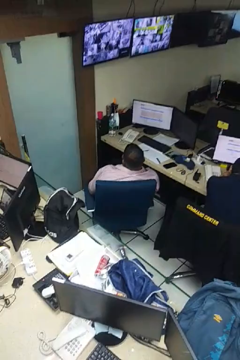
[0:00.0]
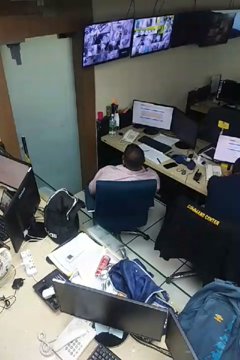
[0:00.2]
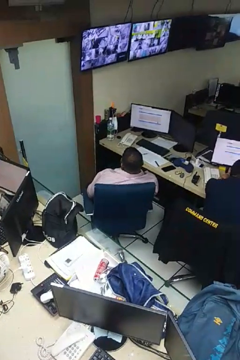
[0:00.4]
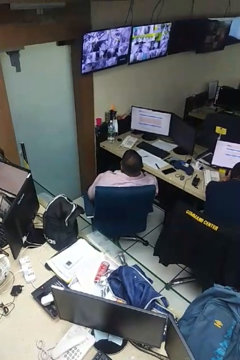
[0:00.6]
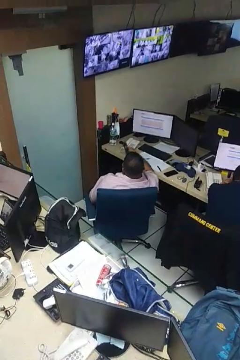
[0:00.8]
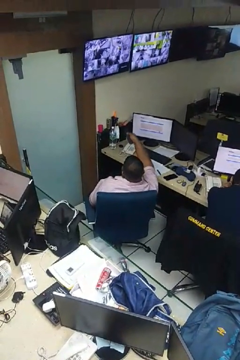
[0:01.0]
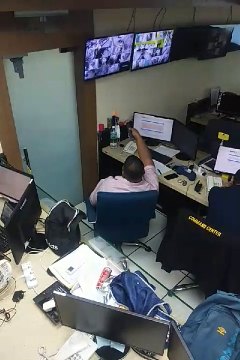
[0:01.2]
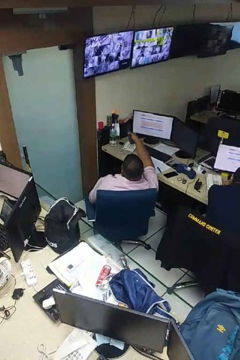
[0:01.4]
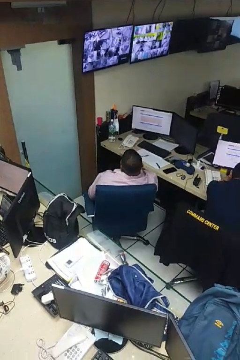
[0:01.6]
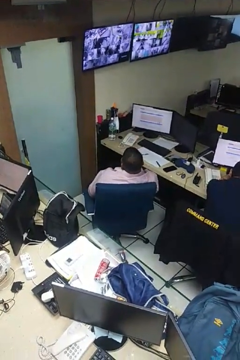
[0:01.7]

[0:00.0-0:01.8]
person uses television remote

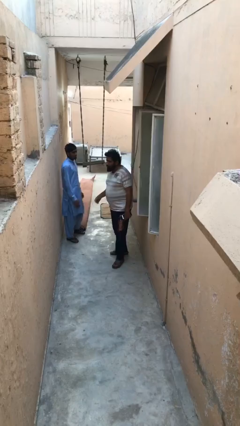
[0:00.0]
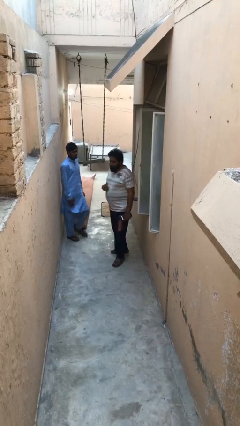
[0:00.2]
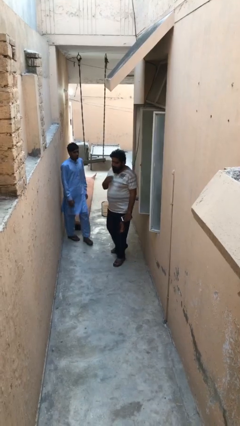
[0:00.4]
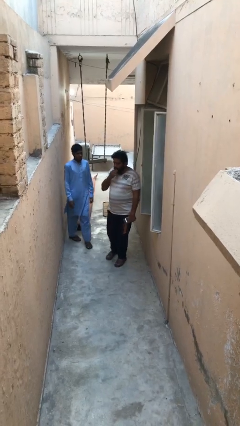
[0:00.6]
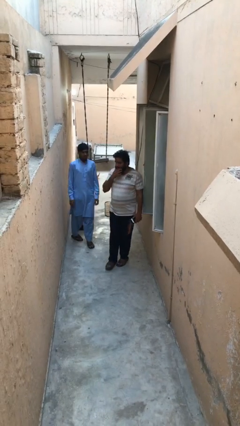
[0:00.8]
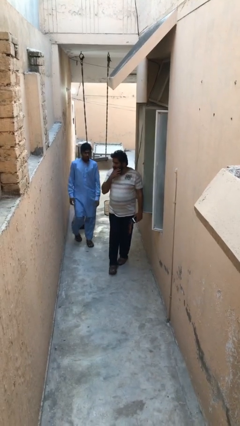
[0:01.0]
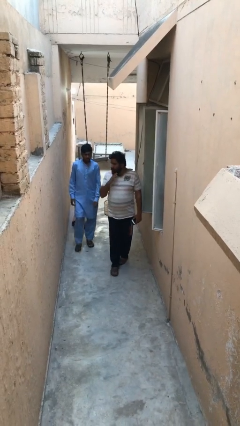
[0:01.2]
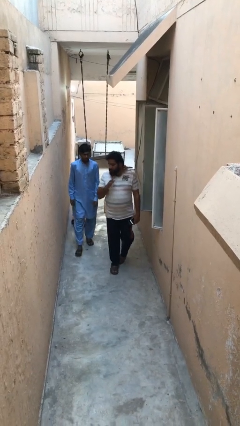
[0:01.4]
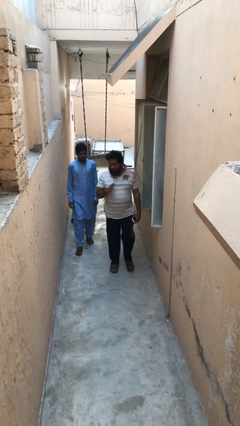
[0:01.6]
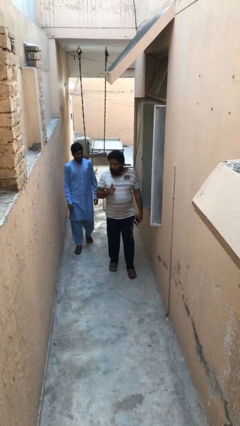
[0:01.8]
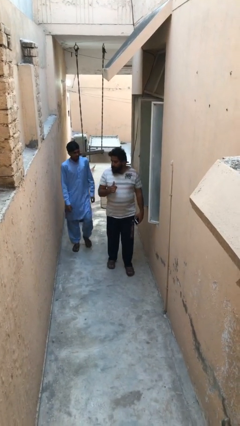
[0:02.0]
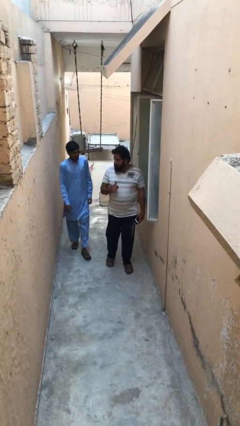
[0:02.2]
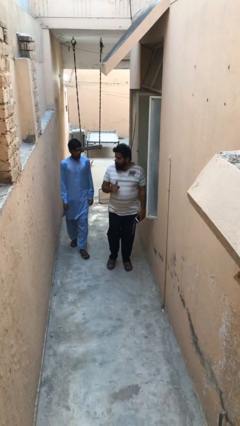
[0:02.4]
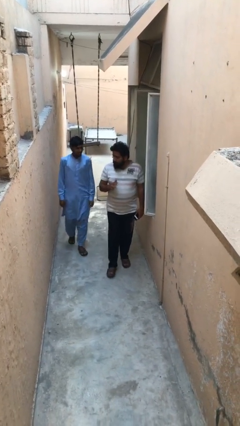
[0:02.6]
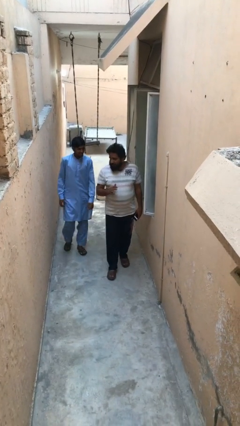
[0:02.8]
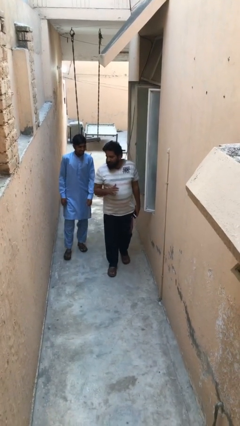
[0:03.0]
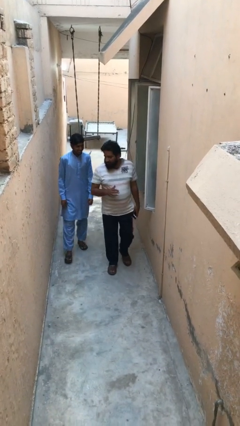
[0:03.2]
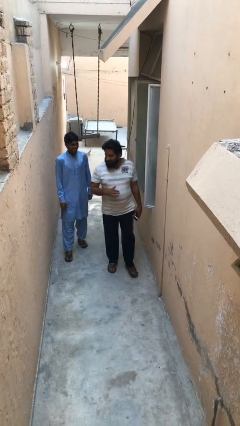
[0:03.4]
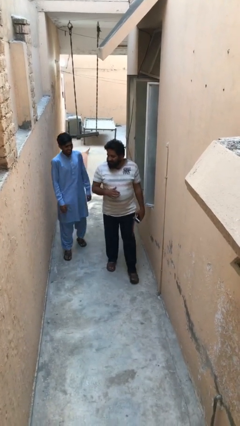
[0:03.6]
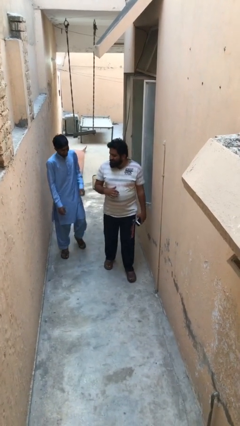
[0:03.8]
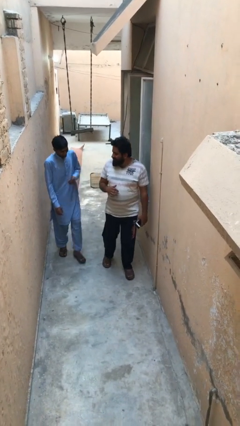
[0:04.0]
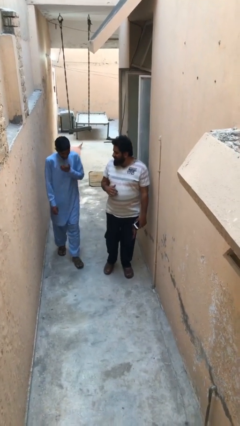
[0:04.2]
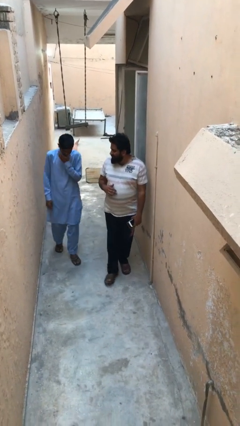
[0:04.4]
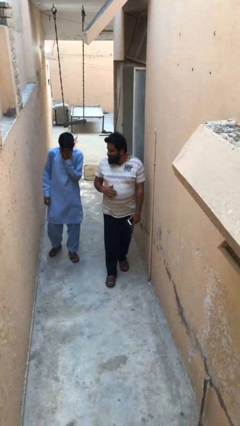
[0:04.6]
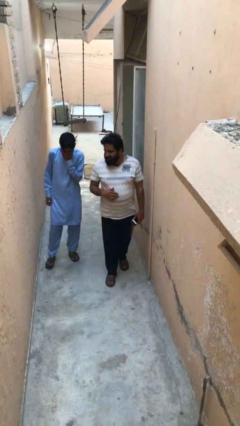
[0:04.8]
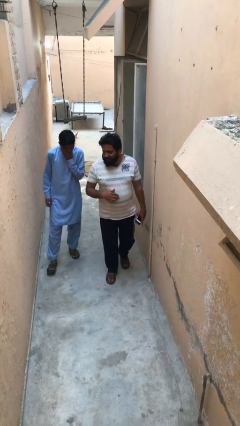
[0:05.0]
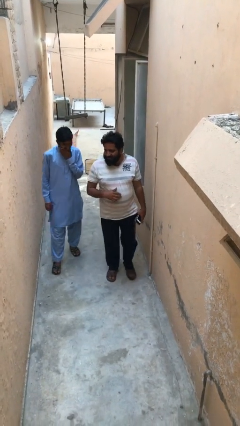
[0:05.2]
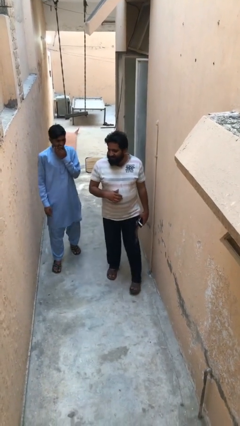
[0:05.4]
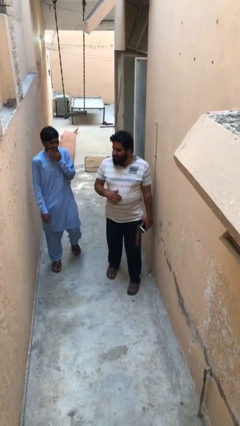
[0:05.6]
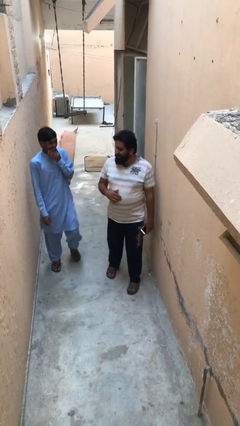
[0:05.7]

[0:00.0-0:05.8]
person talks to person

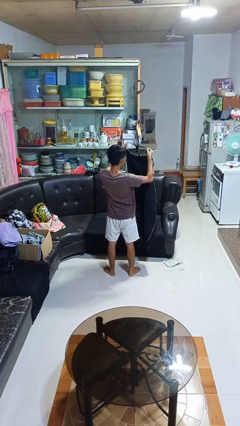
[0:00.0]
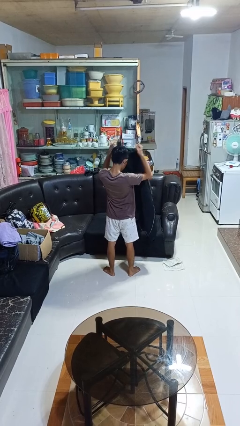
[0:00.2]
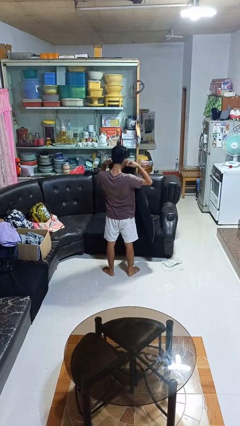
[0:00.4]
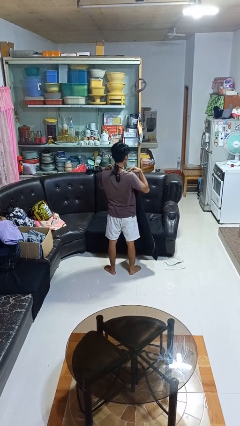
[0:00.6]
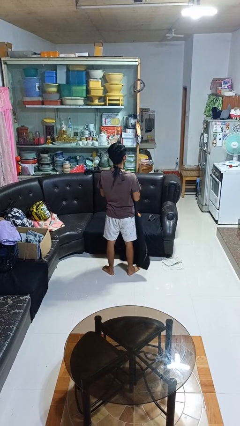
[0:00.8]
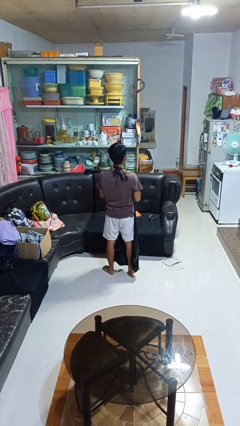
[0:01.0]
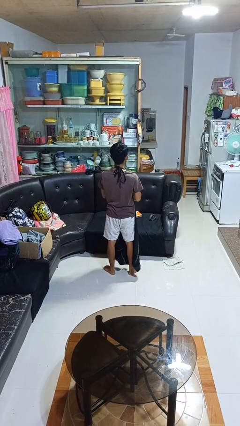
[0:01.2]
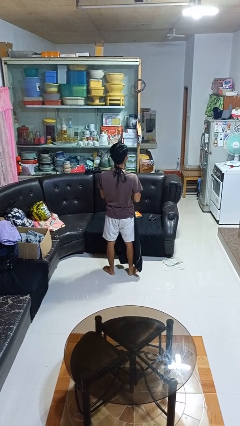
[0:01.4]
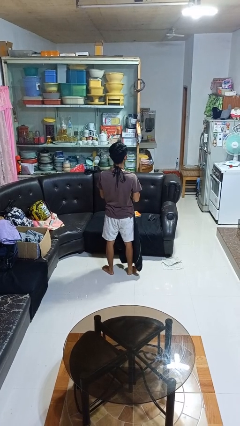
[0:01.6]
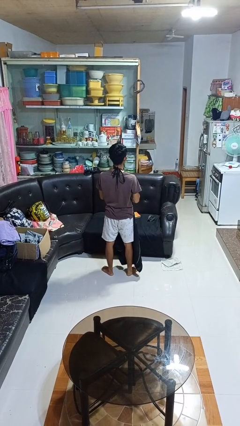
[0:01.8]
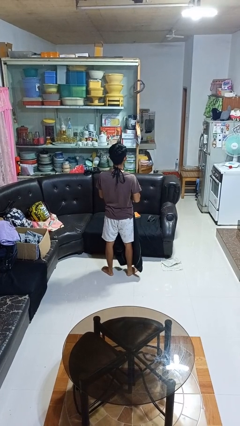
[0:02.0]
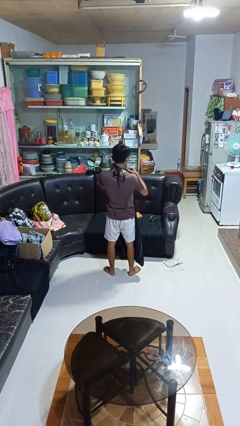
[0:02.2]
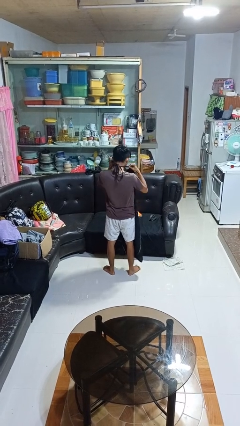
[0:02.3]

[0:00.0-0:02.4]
person puts on apron

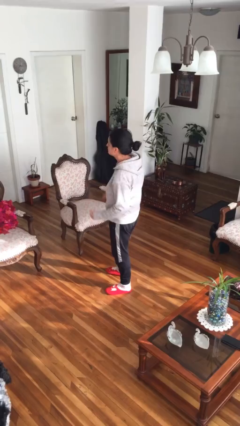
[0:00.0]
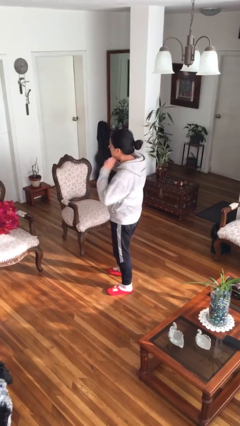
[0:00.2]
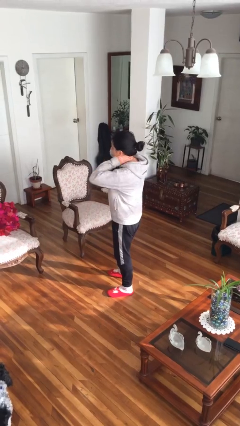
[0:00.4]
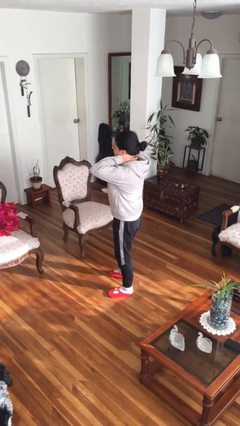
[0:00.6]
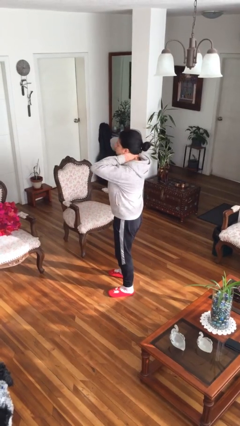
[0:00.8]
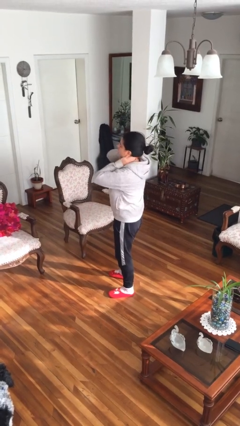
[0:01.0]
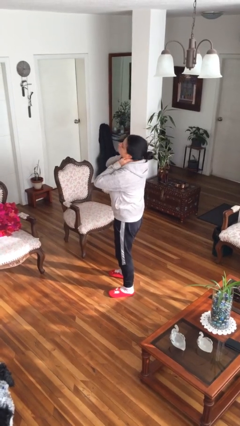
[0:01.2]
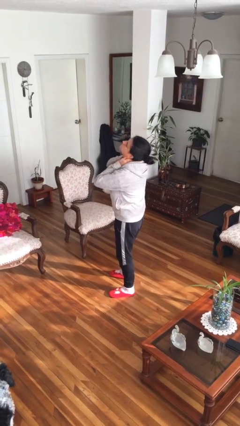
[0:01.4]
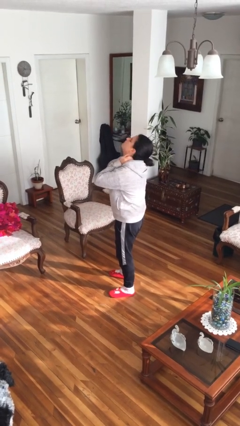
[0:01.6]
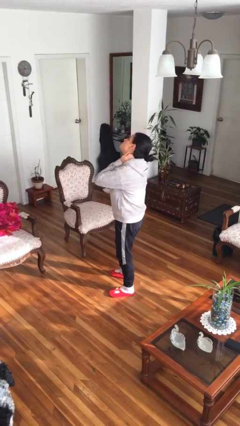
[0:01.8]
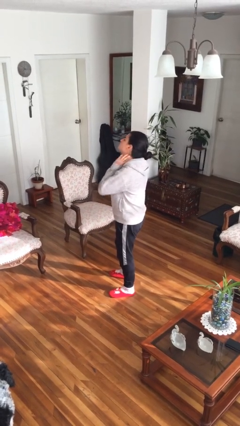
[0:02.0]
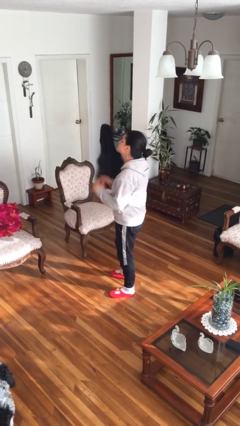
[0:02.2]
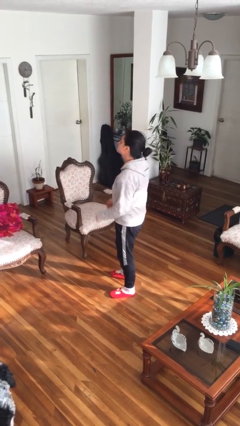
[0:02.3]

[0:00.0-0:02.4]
person rubs neck

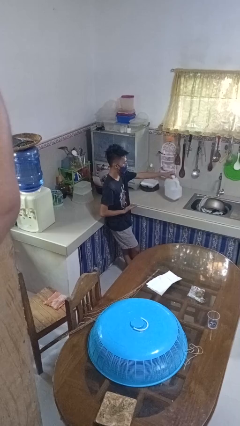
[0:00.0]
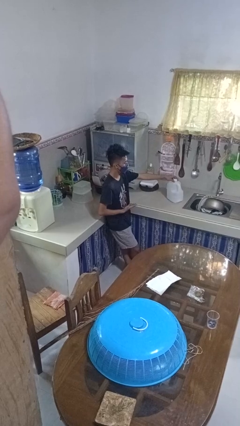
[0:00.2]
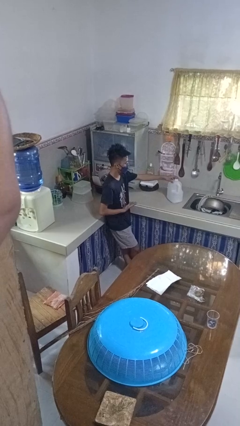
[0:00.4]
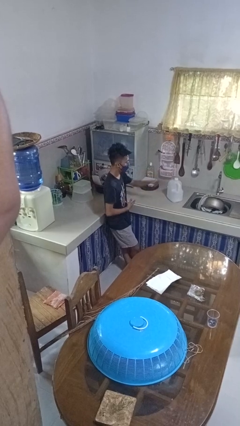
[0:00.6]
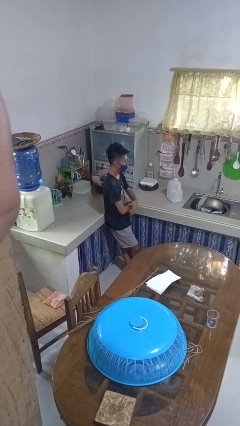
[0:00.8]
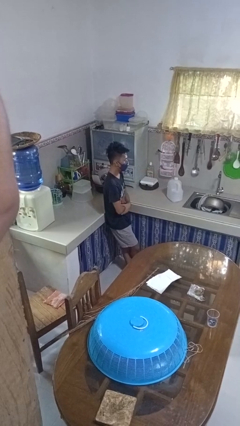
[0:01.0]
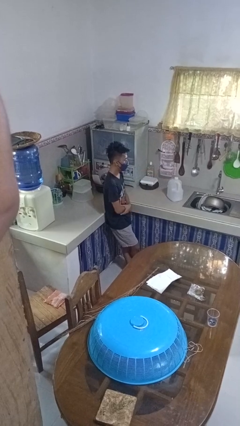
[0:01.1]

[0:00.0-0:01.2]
person puts down object on countertop

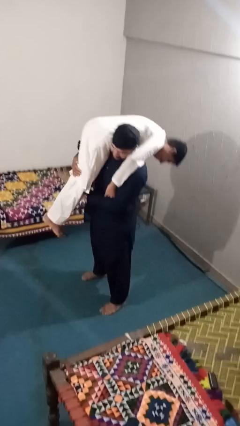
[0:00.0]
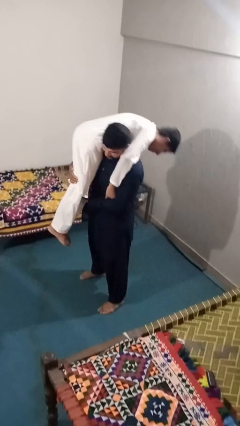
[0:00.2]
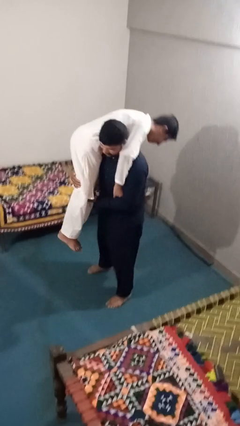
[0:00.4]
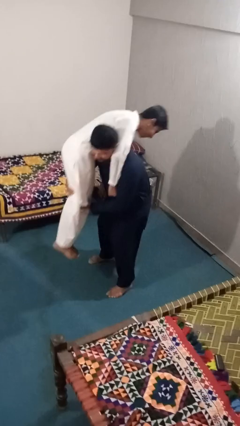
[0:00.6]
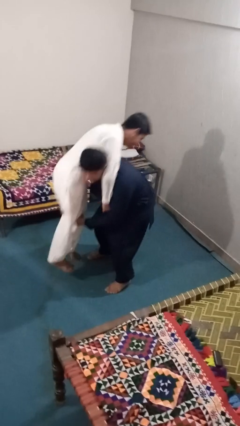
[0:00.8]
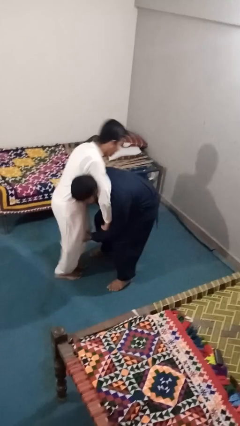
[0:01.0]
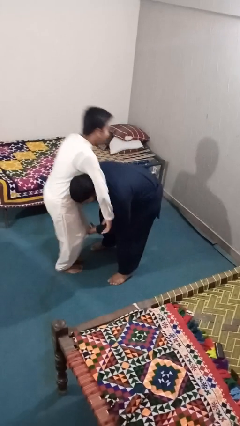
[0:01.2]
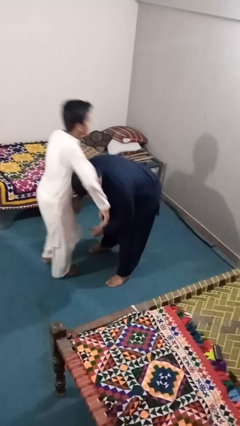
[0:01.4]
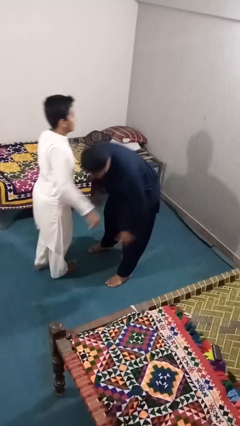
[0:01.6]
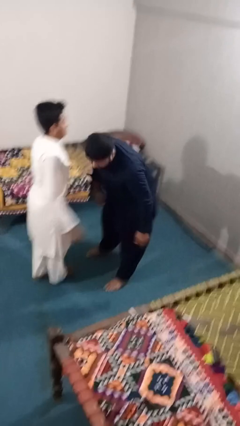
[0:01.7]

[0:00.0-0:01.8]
person puts down person

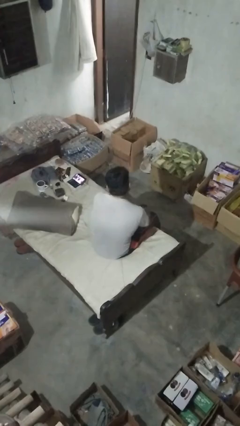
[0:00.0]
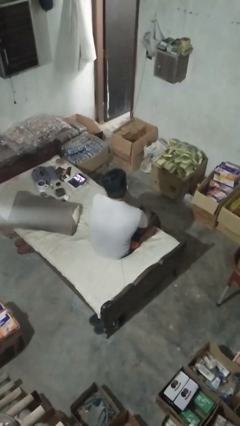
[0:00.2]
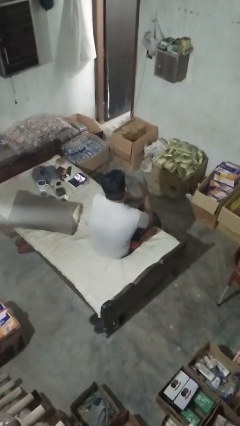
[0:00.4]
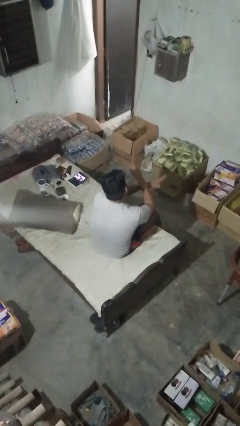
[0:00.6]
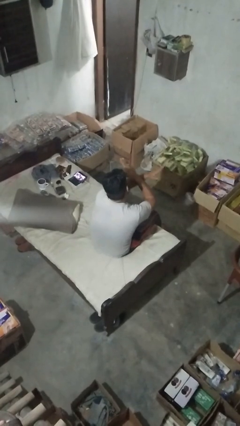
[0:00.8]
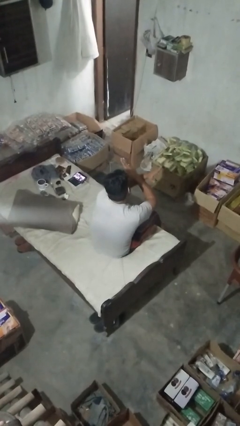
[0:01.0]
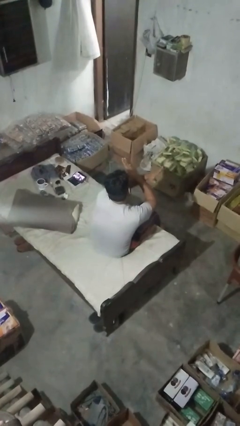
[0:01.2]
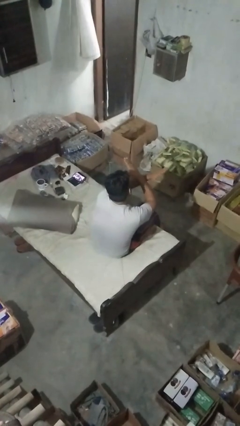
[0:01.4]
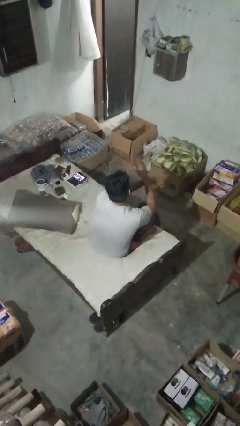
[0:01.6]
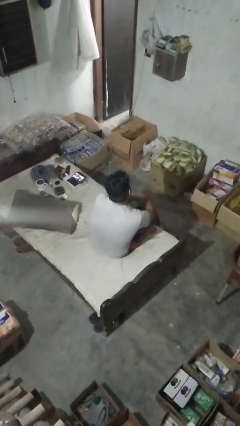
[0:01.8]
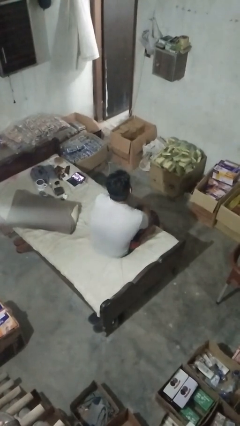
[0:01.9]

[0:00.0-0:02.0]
person gestures arms x
